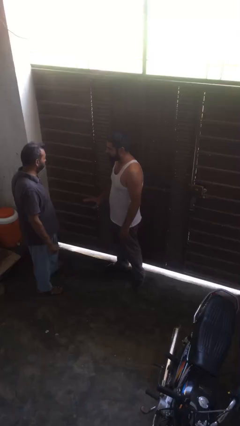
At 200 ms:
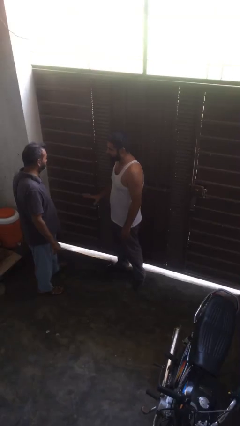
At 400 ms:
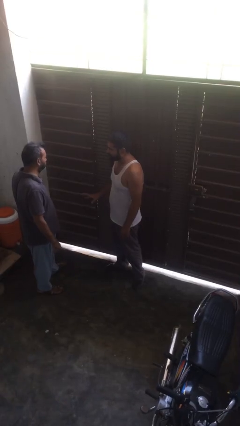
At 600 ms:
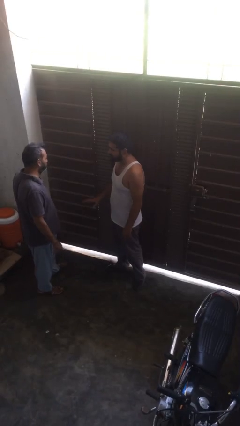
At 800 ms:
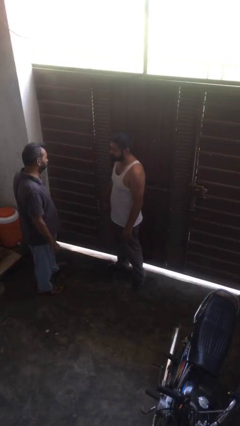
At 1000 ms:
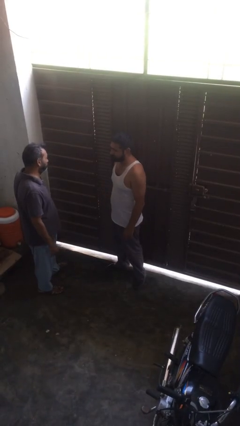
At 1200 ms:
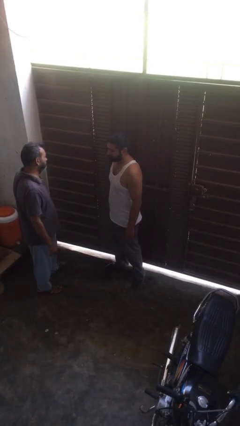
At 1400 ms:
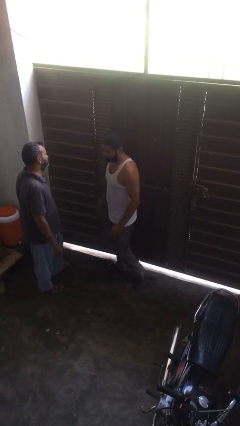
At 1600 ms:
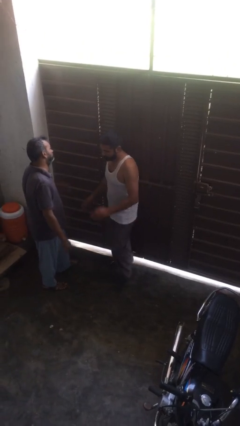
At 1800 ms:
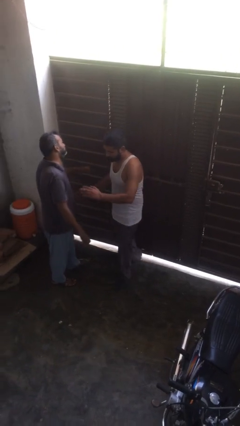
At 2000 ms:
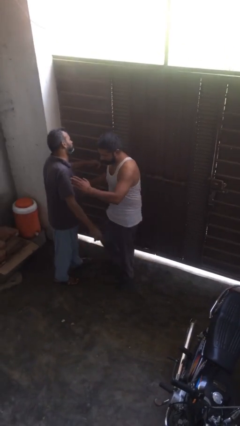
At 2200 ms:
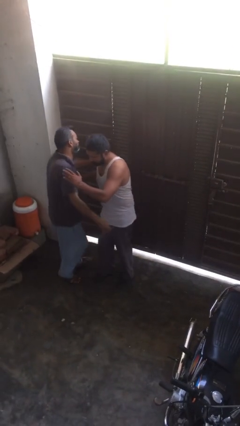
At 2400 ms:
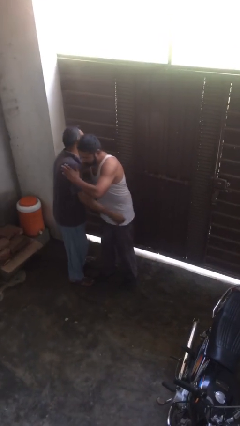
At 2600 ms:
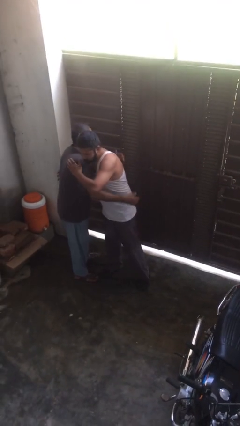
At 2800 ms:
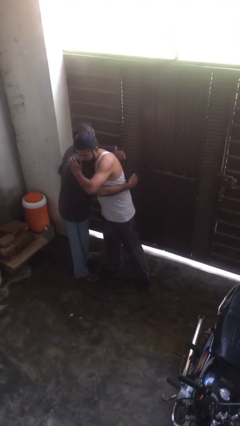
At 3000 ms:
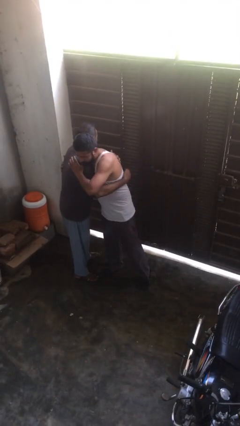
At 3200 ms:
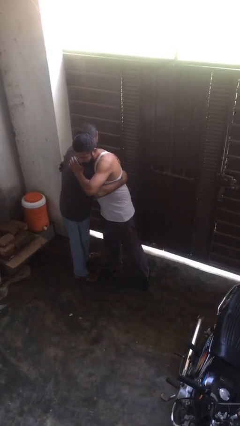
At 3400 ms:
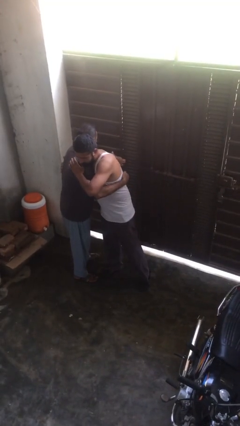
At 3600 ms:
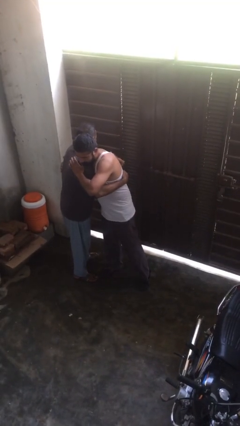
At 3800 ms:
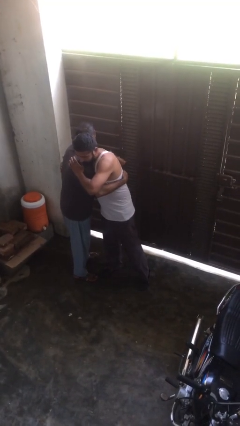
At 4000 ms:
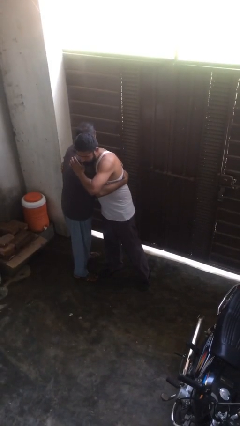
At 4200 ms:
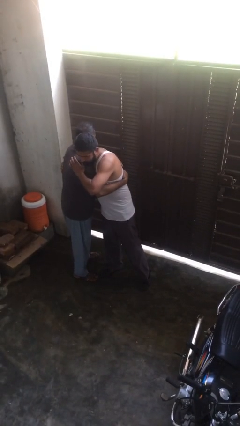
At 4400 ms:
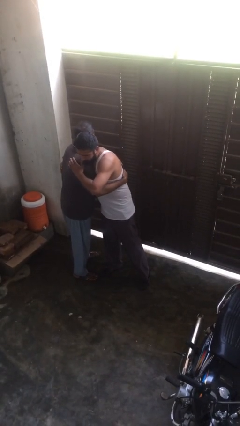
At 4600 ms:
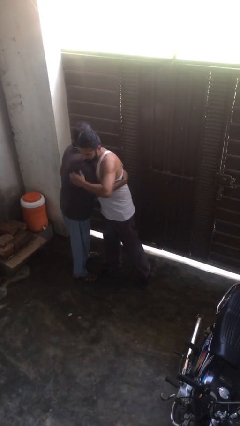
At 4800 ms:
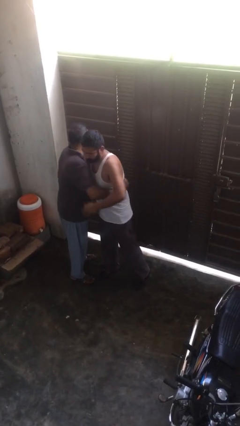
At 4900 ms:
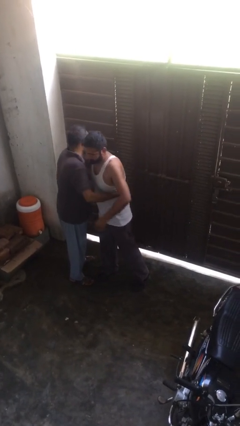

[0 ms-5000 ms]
person embraces person

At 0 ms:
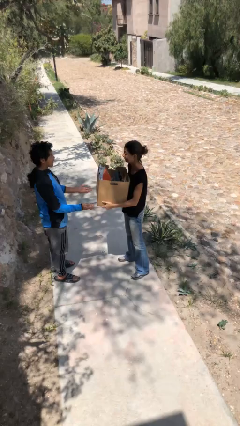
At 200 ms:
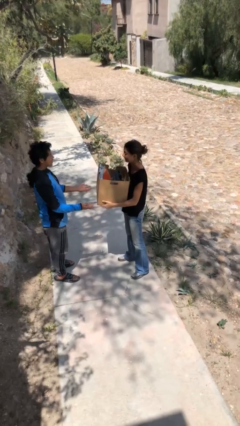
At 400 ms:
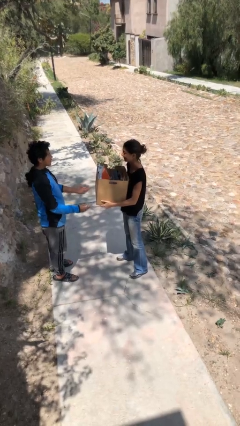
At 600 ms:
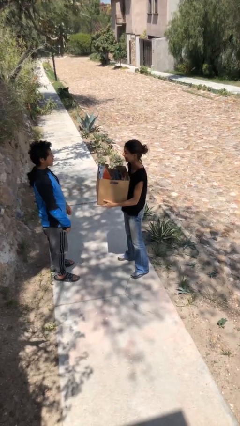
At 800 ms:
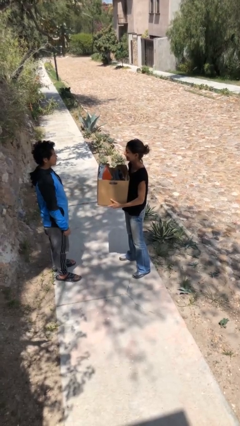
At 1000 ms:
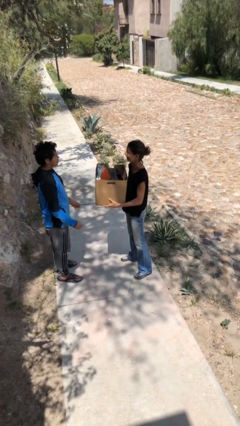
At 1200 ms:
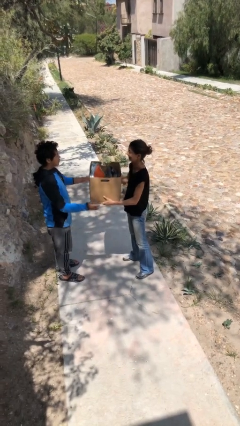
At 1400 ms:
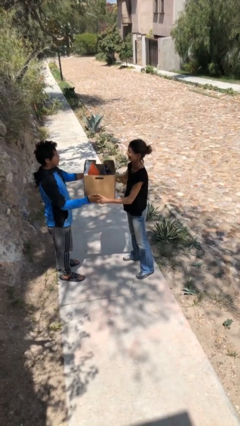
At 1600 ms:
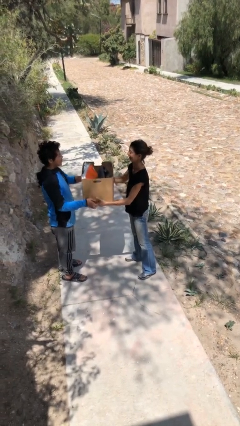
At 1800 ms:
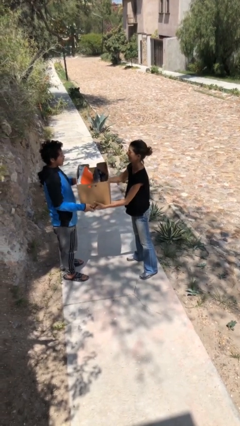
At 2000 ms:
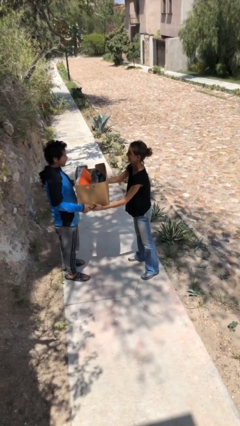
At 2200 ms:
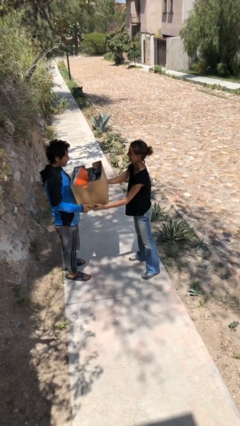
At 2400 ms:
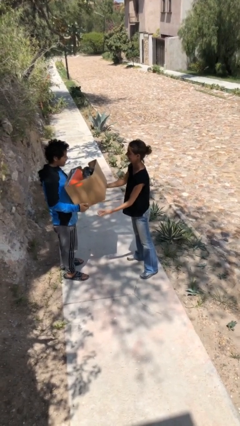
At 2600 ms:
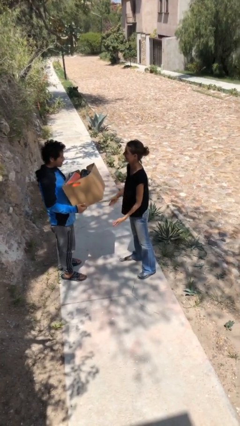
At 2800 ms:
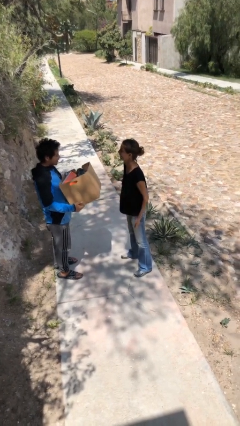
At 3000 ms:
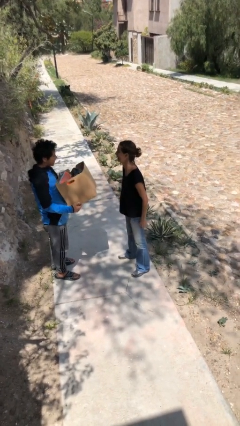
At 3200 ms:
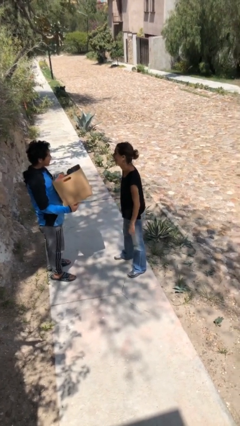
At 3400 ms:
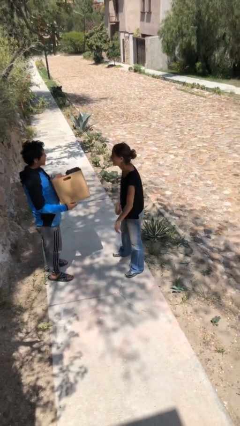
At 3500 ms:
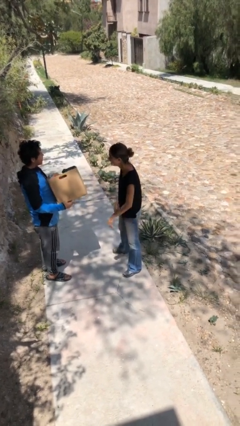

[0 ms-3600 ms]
person transfers object to person

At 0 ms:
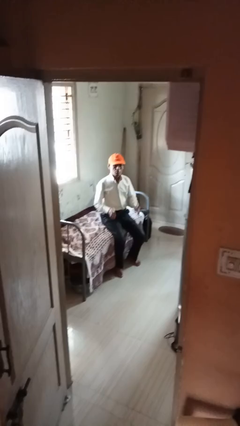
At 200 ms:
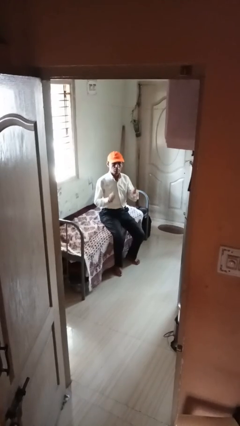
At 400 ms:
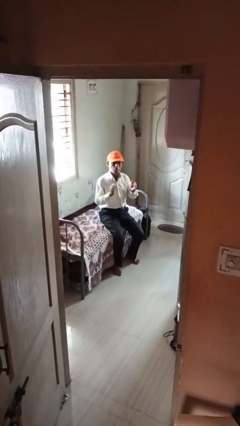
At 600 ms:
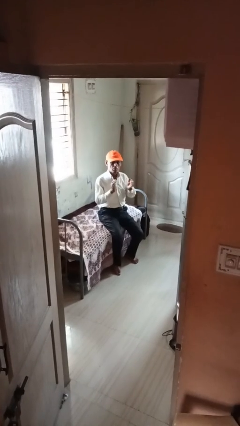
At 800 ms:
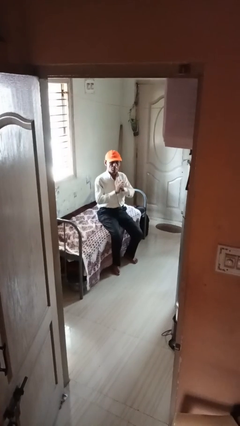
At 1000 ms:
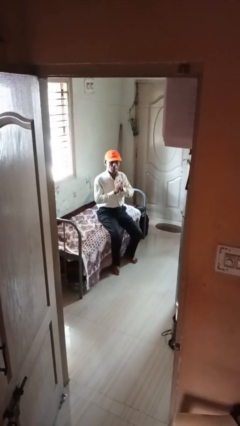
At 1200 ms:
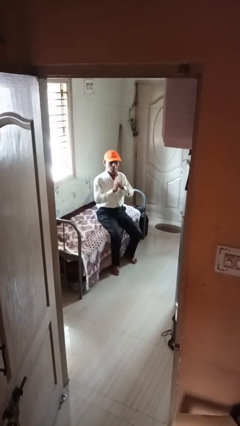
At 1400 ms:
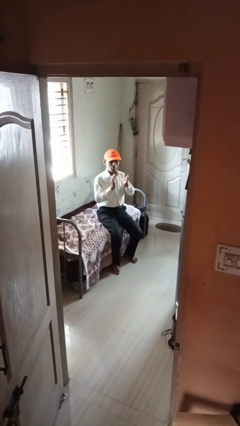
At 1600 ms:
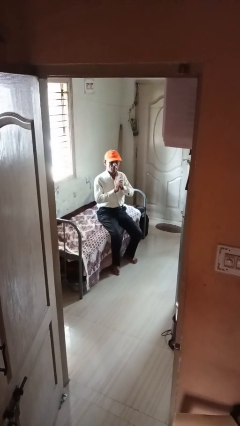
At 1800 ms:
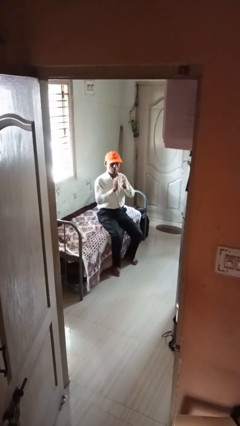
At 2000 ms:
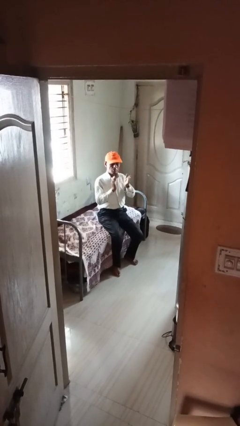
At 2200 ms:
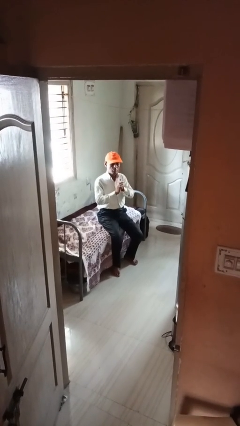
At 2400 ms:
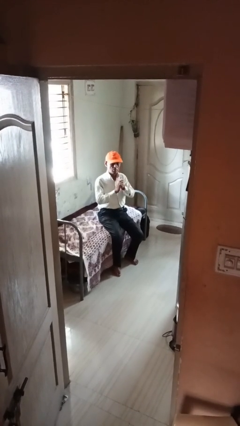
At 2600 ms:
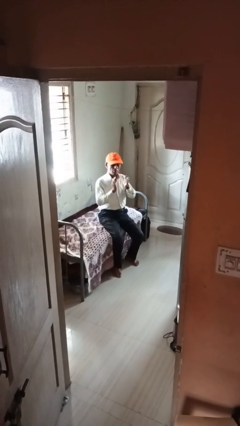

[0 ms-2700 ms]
person claps hands

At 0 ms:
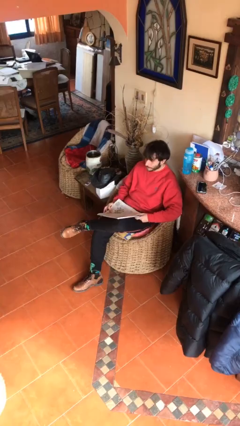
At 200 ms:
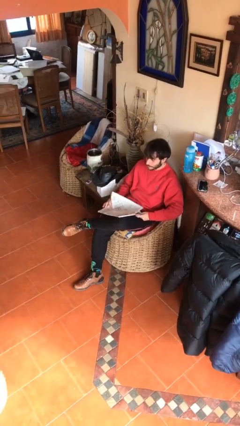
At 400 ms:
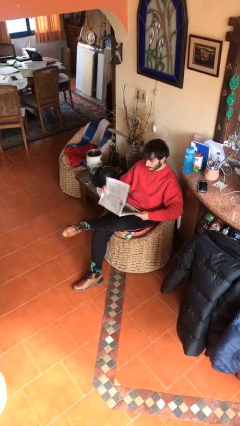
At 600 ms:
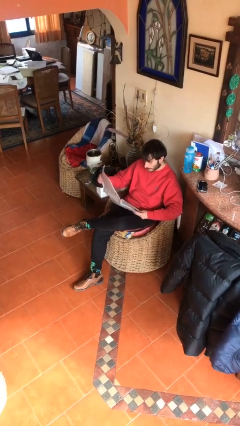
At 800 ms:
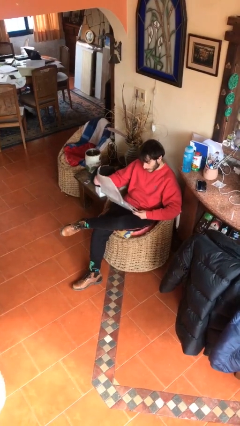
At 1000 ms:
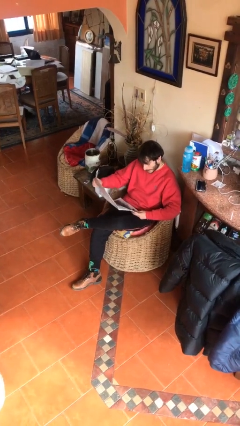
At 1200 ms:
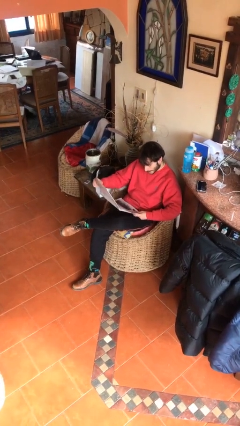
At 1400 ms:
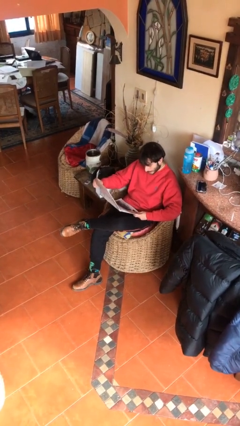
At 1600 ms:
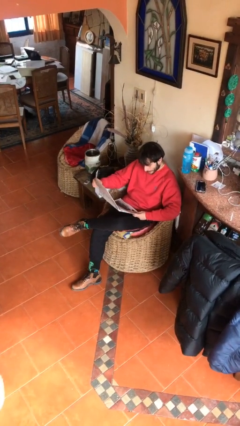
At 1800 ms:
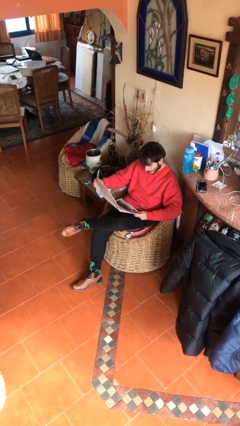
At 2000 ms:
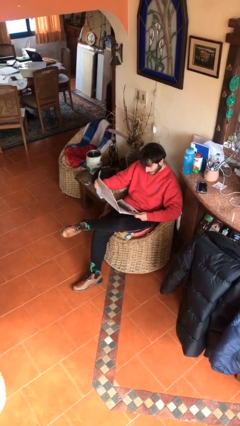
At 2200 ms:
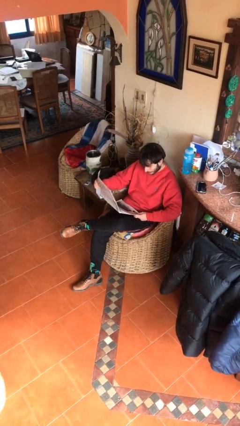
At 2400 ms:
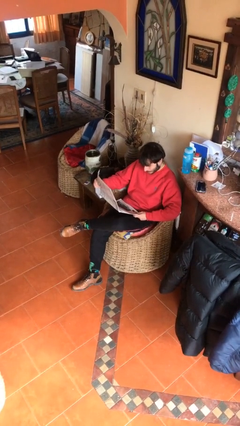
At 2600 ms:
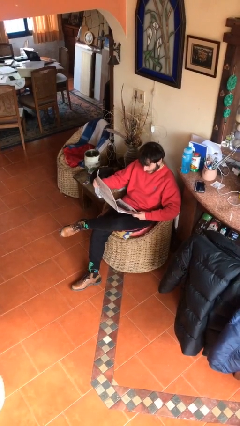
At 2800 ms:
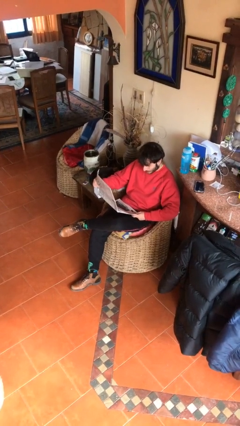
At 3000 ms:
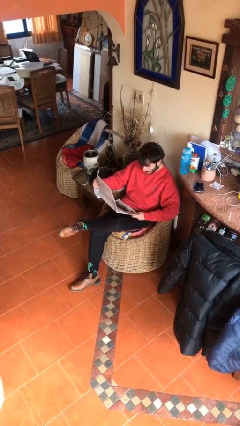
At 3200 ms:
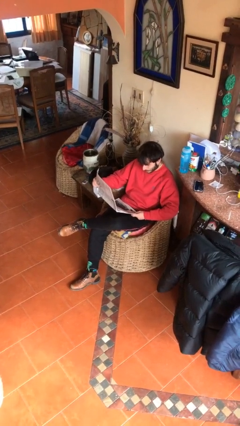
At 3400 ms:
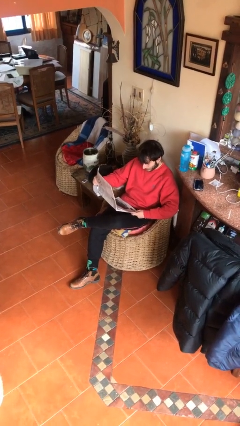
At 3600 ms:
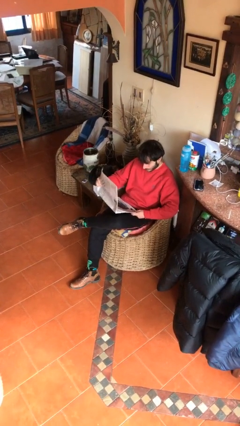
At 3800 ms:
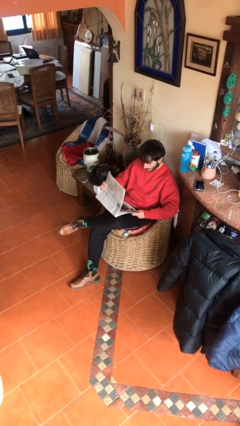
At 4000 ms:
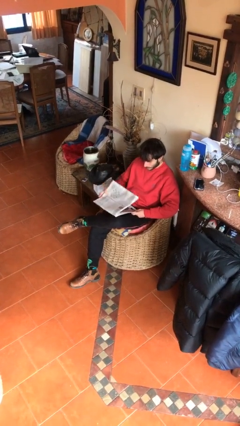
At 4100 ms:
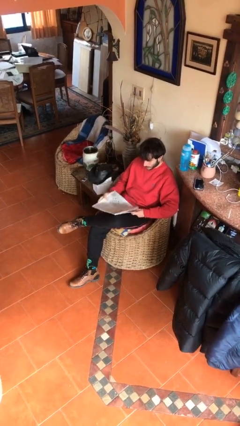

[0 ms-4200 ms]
person reads newspaper

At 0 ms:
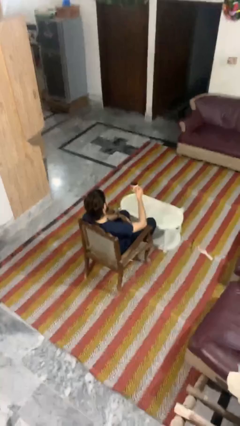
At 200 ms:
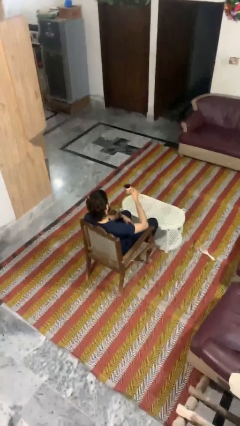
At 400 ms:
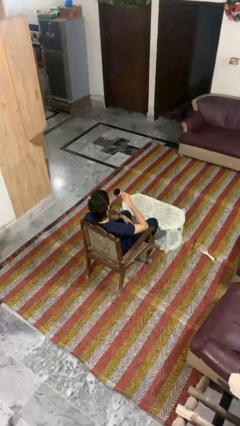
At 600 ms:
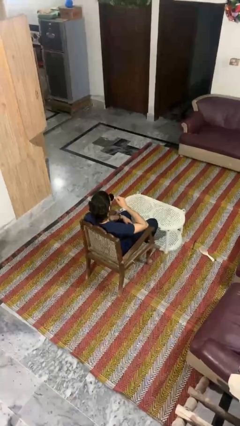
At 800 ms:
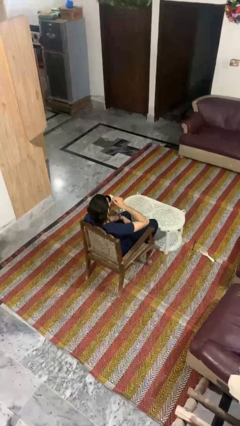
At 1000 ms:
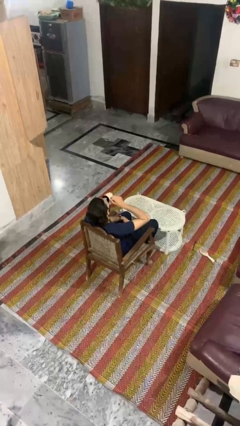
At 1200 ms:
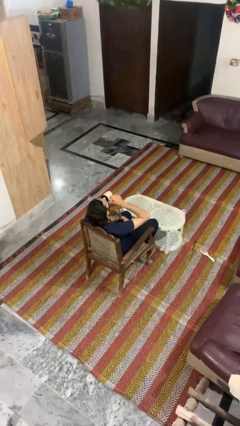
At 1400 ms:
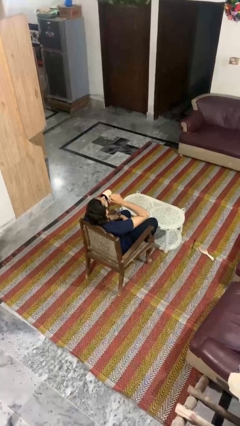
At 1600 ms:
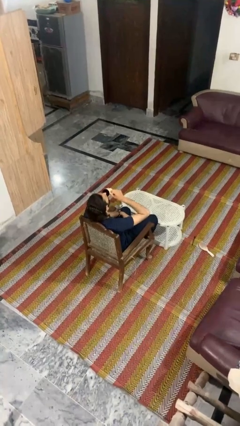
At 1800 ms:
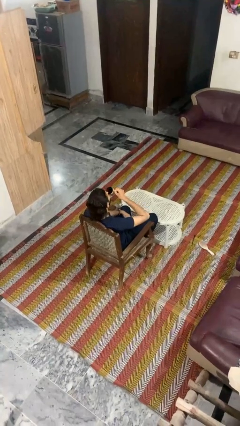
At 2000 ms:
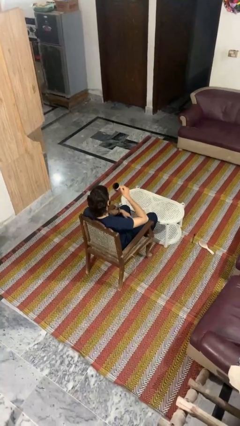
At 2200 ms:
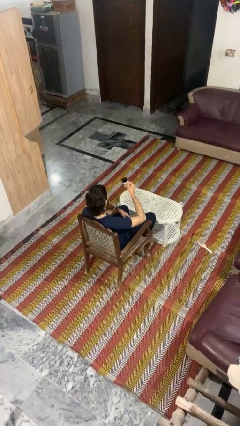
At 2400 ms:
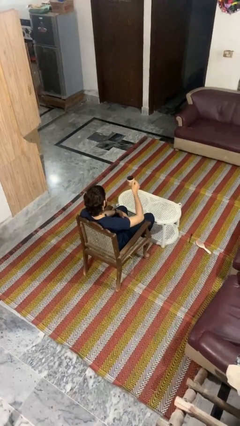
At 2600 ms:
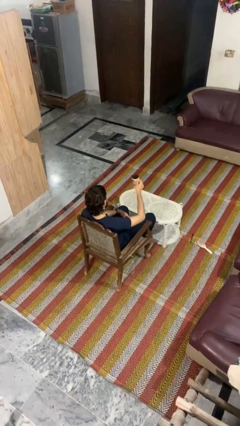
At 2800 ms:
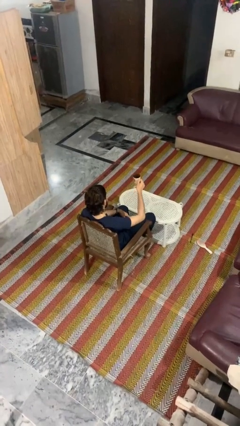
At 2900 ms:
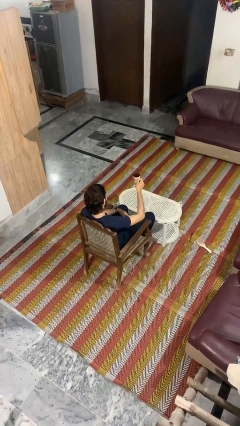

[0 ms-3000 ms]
person drinks from mug
